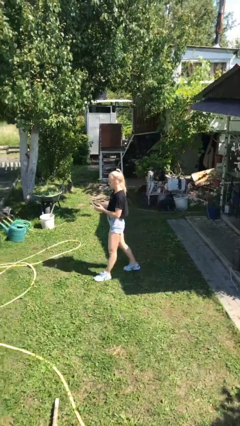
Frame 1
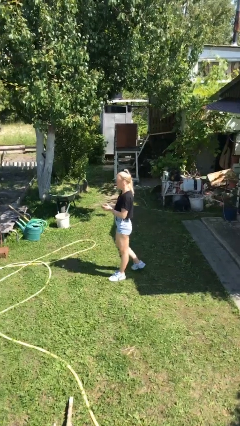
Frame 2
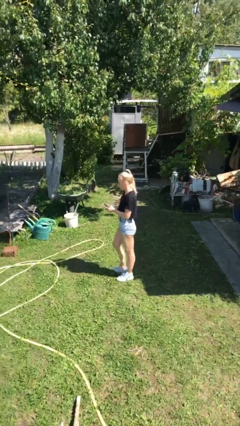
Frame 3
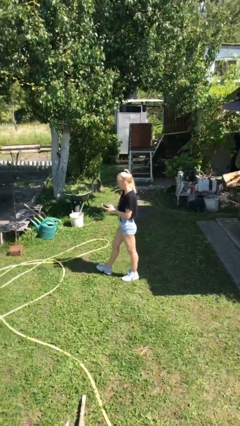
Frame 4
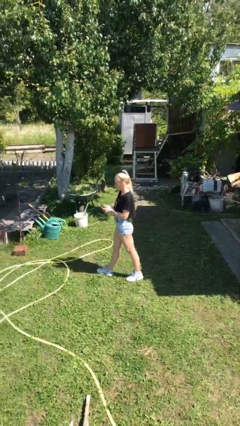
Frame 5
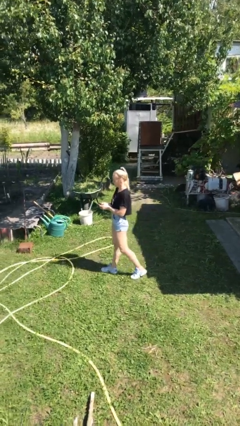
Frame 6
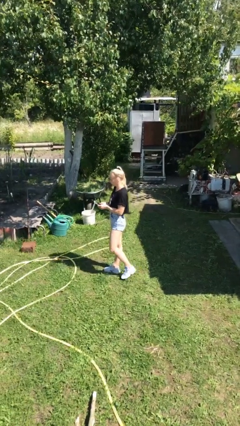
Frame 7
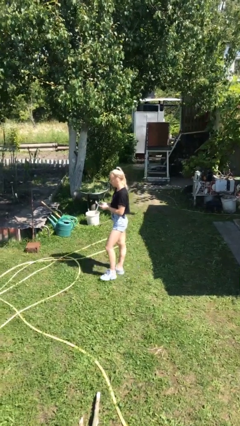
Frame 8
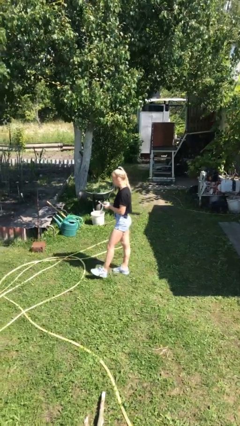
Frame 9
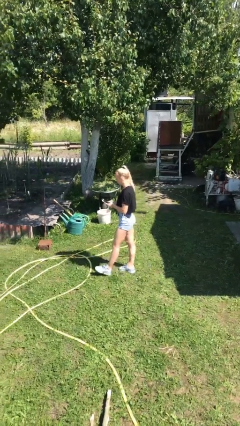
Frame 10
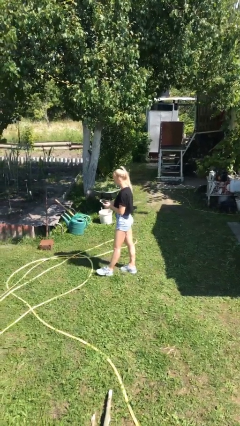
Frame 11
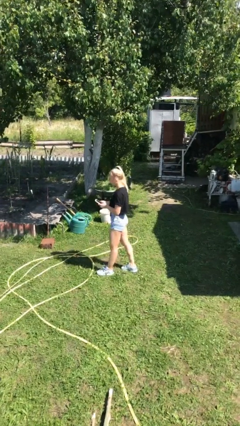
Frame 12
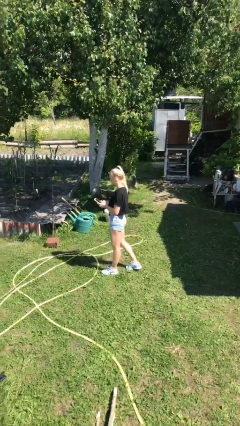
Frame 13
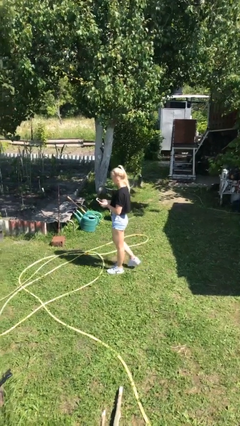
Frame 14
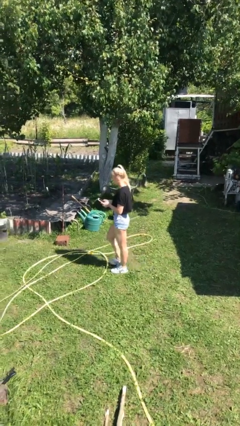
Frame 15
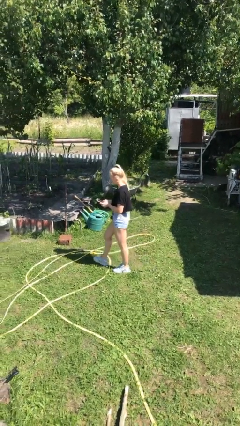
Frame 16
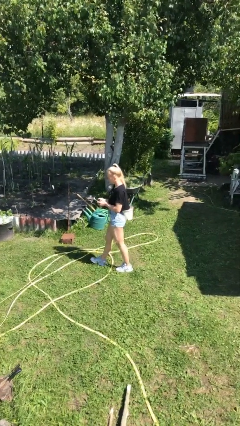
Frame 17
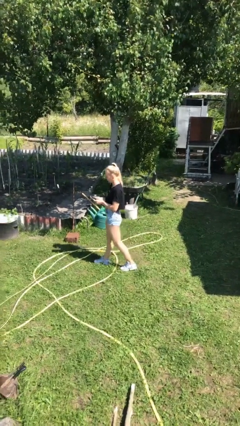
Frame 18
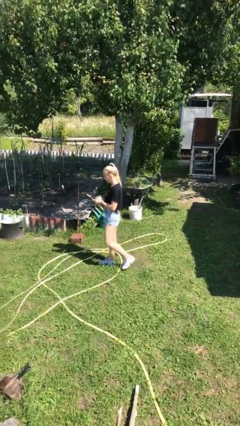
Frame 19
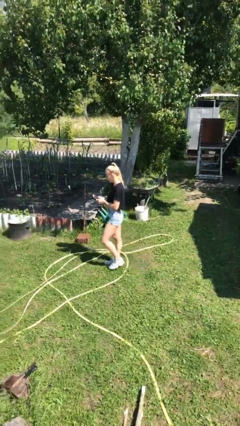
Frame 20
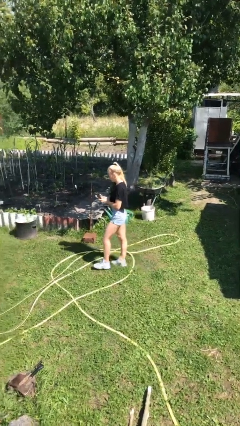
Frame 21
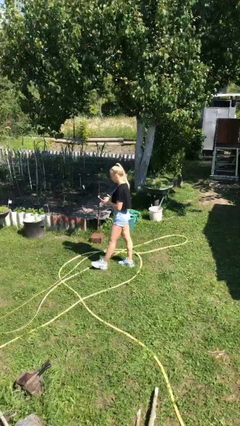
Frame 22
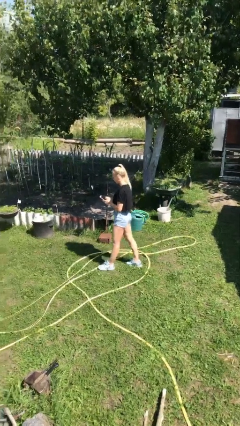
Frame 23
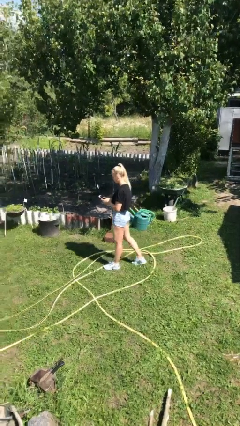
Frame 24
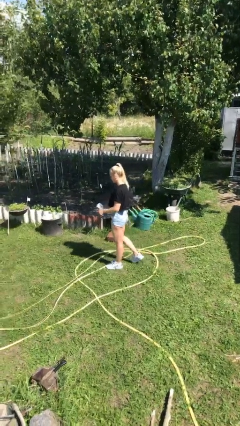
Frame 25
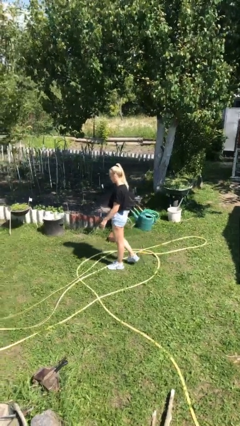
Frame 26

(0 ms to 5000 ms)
person texts on phone

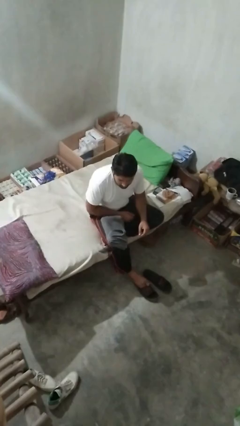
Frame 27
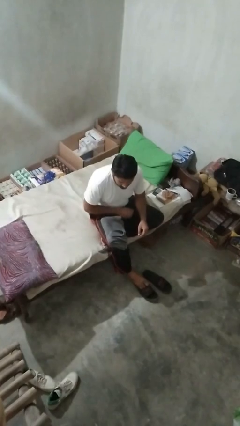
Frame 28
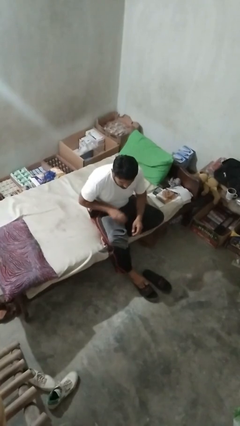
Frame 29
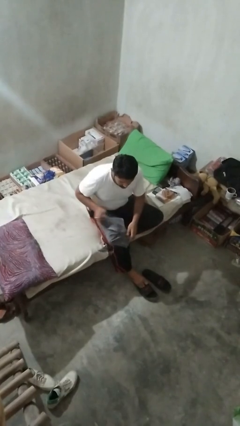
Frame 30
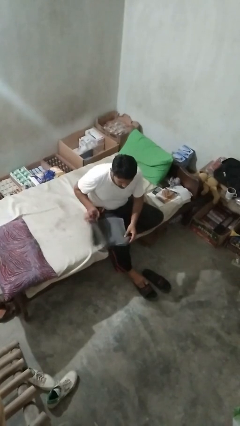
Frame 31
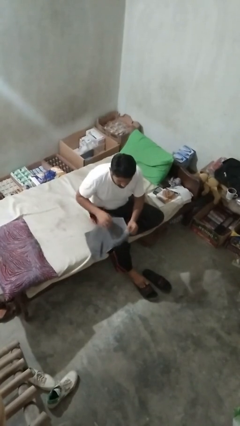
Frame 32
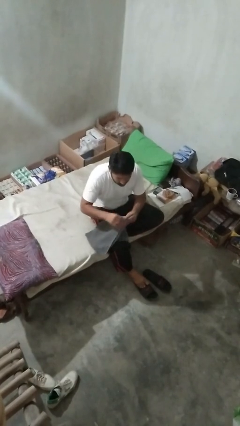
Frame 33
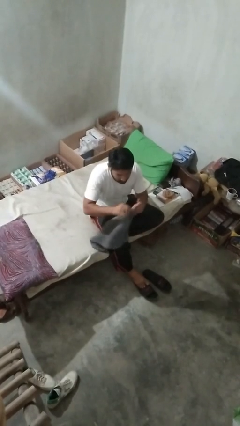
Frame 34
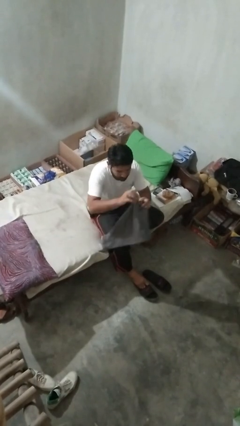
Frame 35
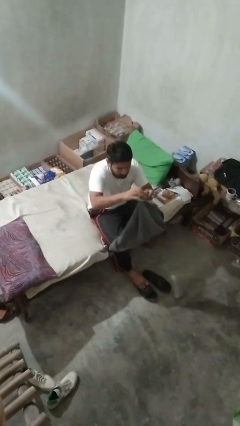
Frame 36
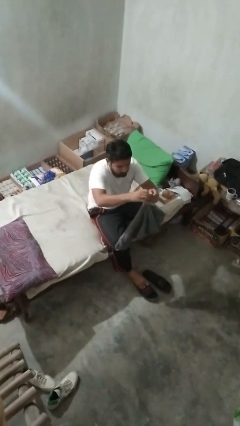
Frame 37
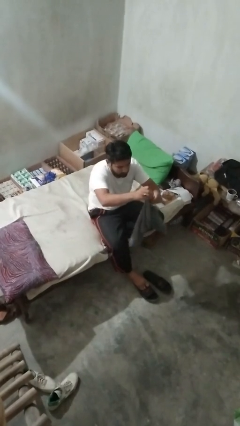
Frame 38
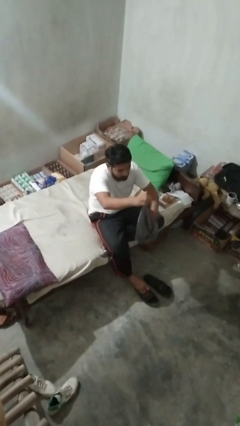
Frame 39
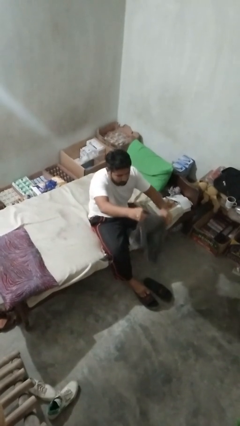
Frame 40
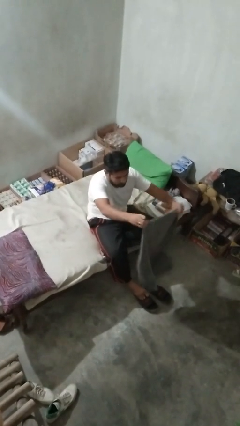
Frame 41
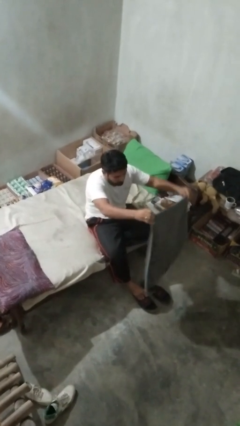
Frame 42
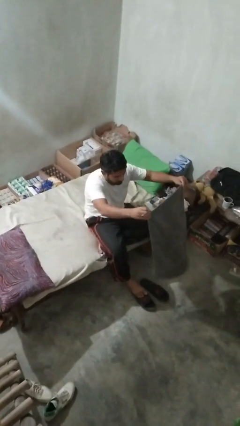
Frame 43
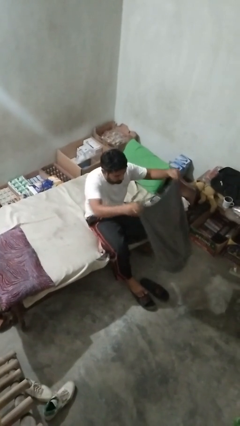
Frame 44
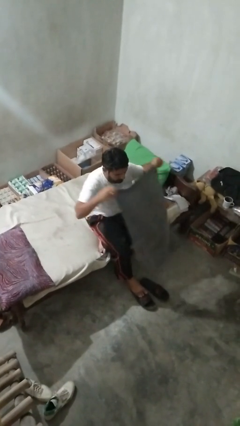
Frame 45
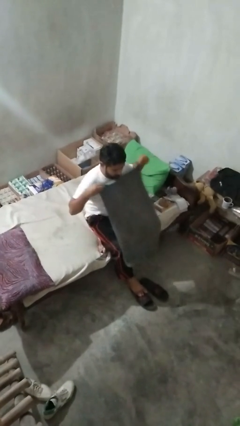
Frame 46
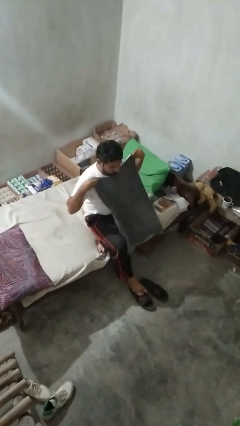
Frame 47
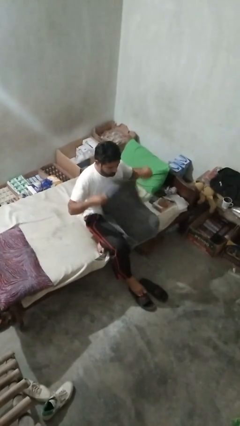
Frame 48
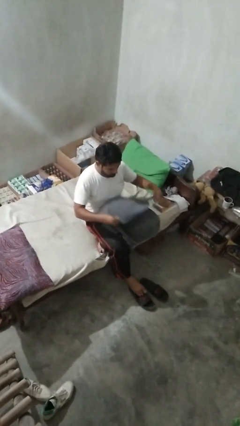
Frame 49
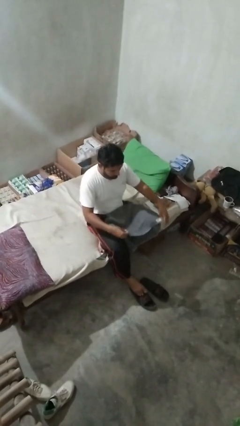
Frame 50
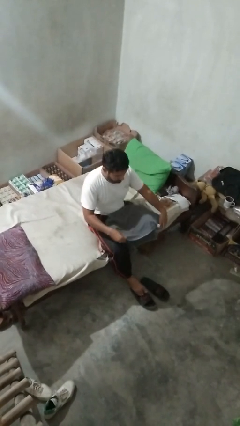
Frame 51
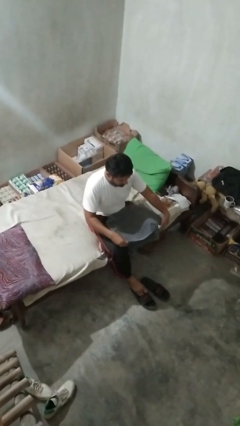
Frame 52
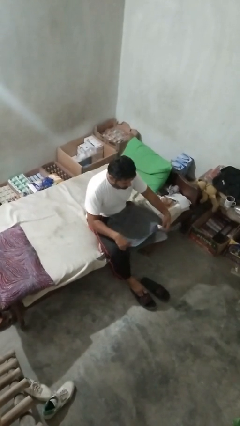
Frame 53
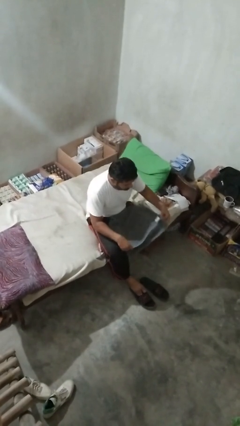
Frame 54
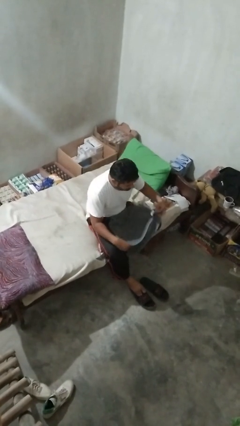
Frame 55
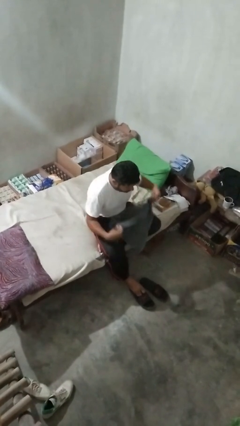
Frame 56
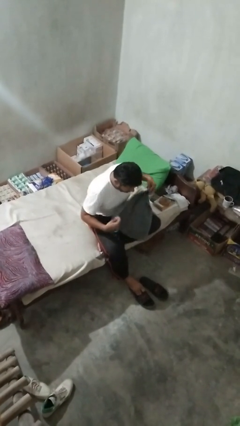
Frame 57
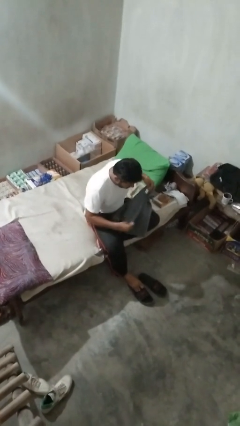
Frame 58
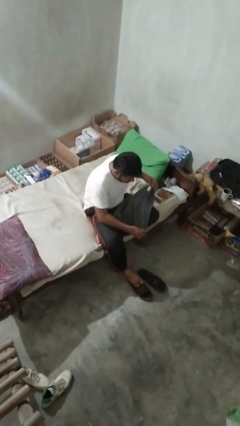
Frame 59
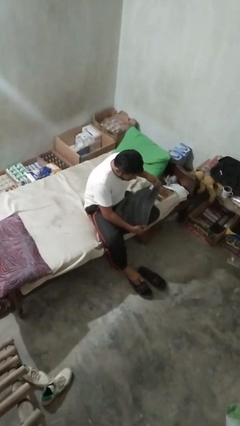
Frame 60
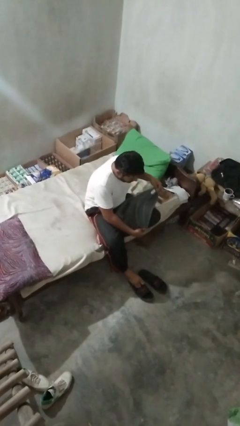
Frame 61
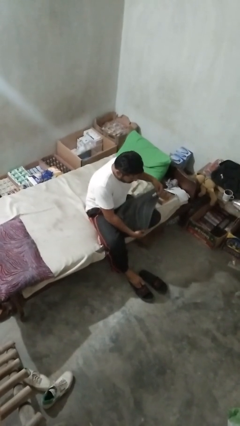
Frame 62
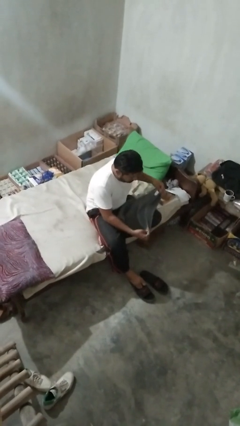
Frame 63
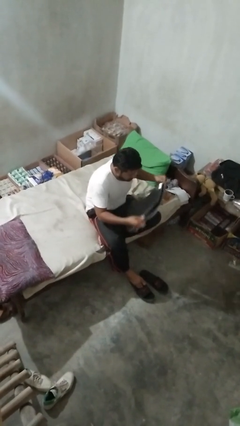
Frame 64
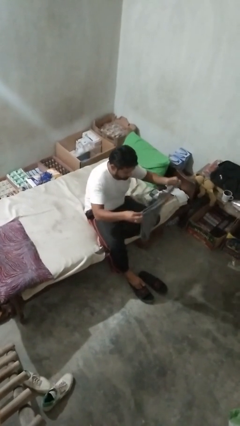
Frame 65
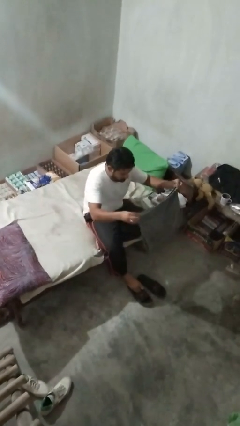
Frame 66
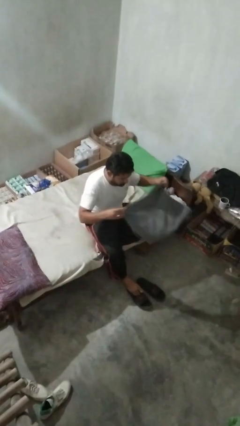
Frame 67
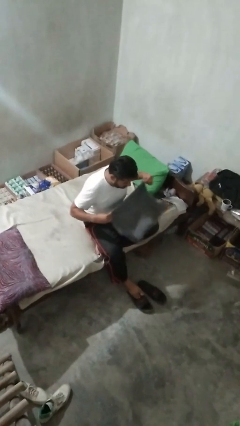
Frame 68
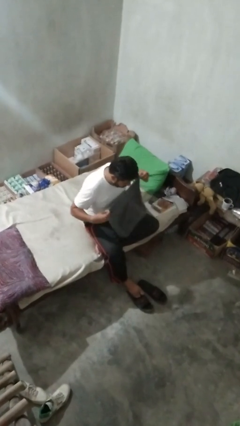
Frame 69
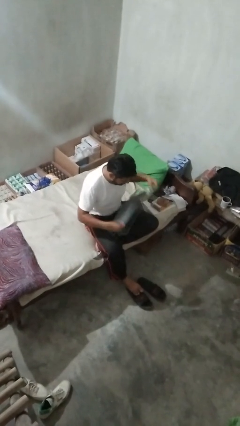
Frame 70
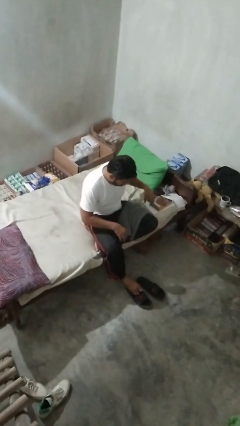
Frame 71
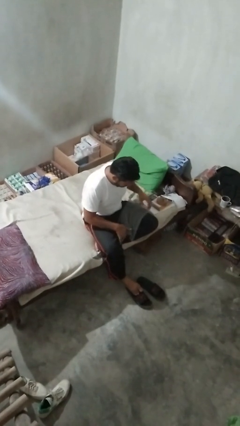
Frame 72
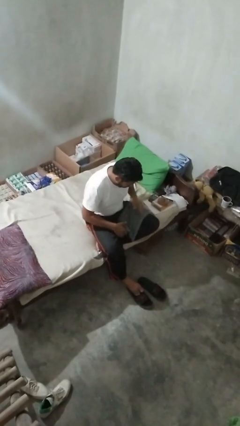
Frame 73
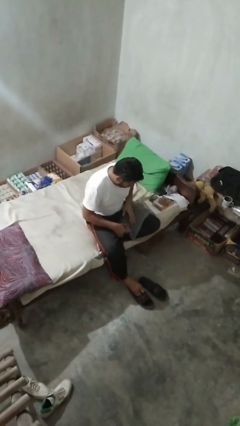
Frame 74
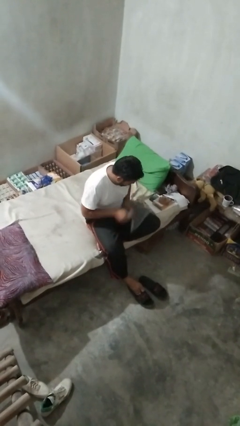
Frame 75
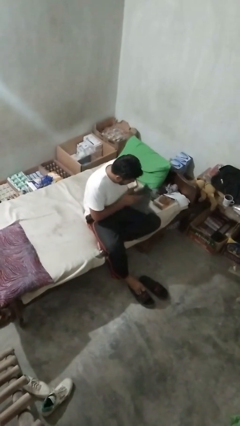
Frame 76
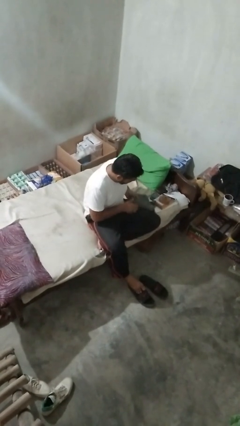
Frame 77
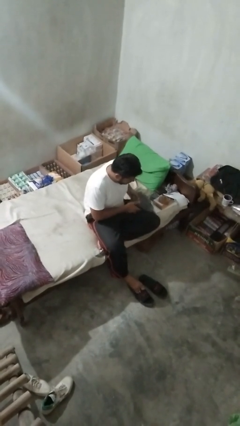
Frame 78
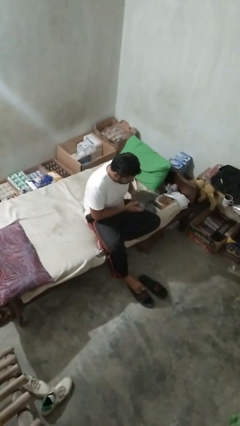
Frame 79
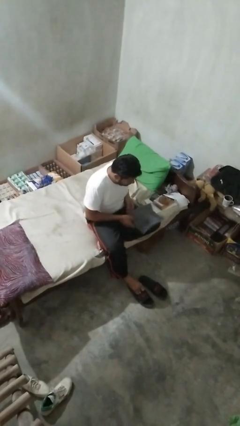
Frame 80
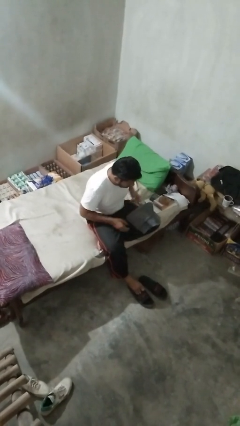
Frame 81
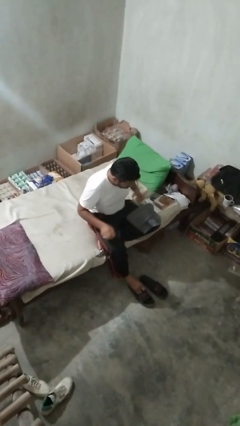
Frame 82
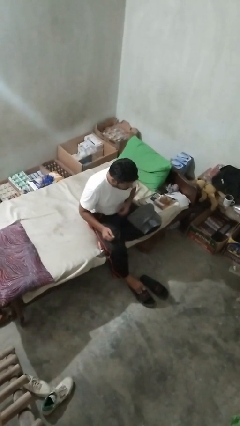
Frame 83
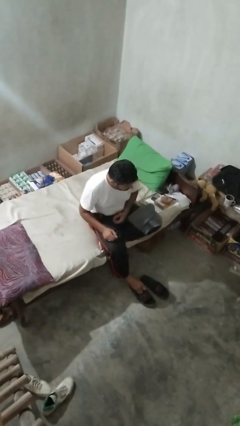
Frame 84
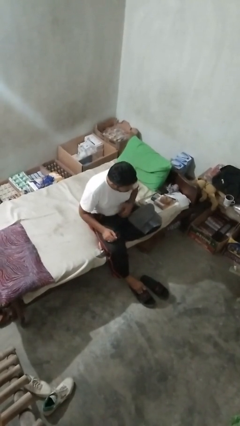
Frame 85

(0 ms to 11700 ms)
person folds towel

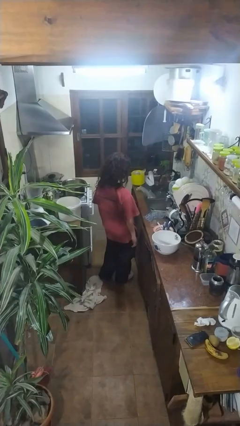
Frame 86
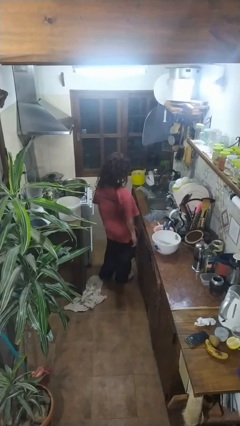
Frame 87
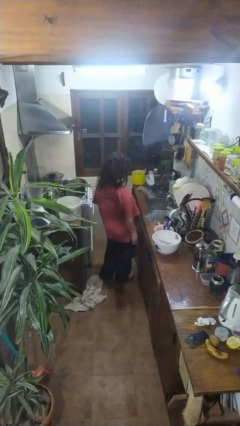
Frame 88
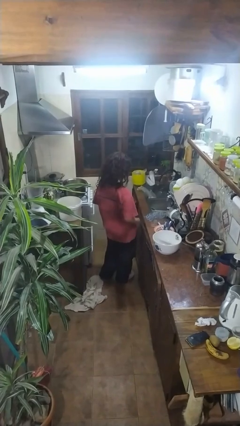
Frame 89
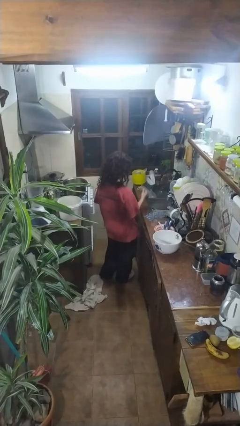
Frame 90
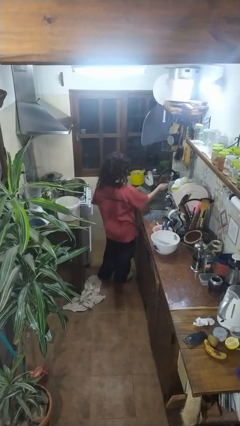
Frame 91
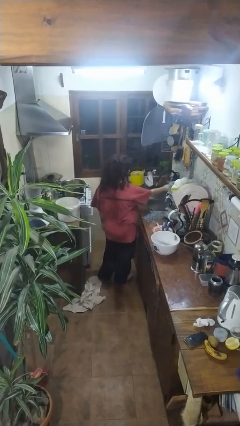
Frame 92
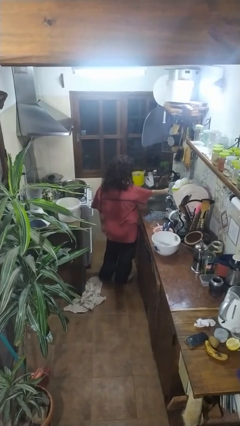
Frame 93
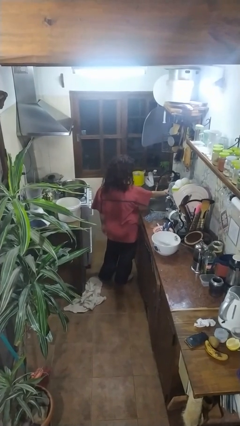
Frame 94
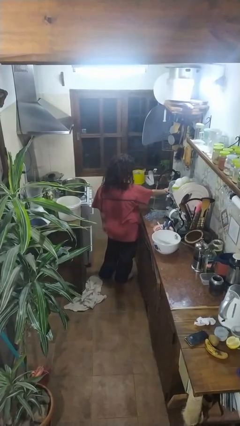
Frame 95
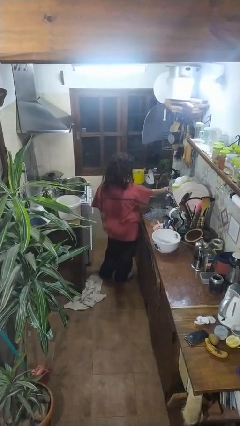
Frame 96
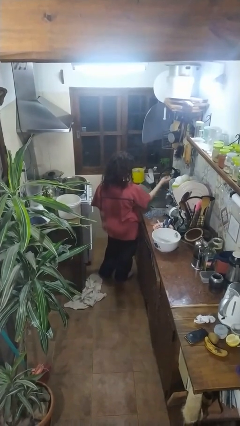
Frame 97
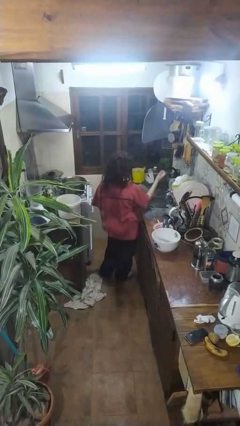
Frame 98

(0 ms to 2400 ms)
person turns on faucet
